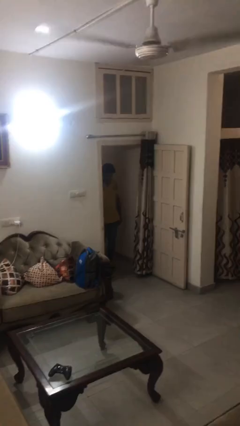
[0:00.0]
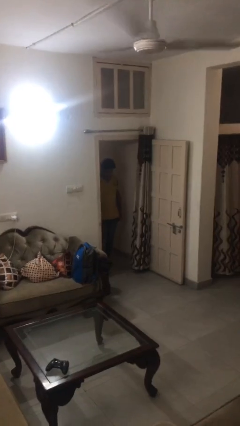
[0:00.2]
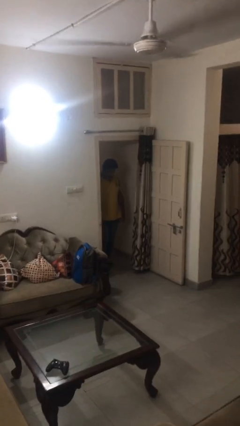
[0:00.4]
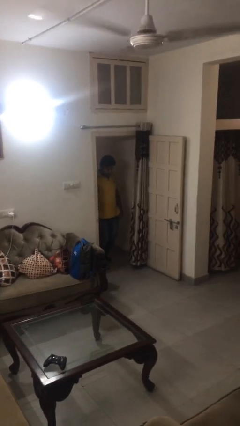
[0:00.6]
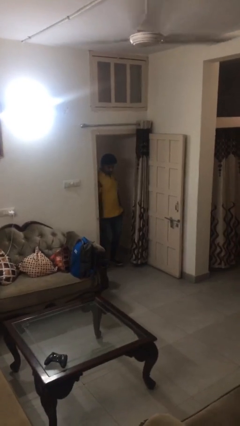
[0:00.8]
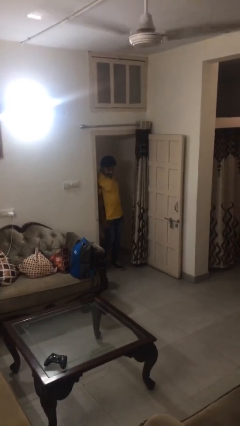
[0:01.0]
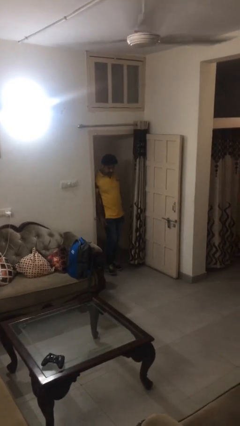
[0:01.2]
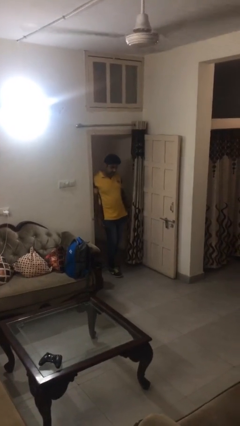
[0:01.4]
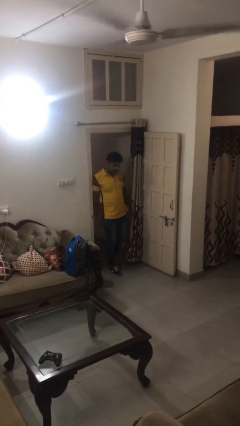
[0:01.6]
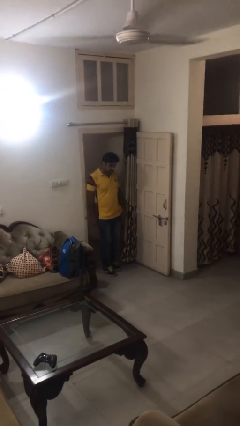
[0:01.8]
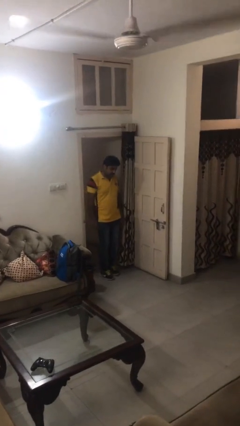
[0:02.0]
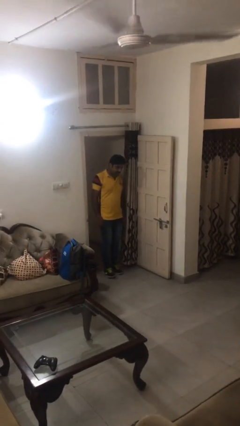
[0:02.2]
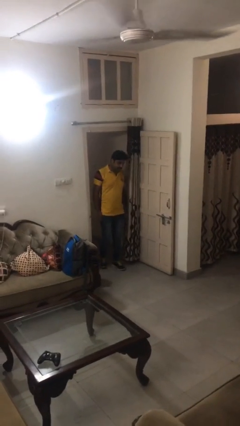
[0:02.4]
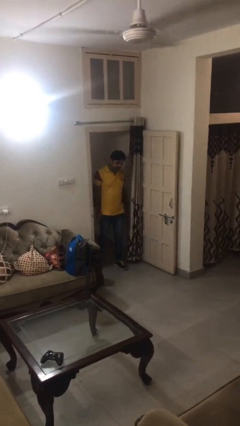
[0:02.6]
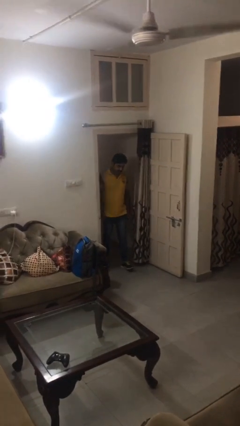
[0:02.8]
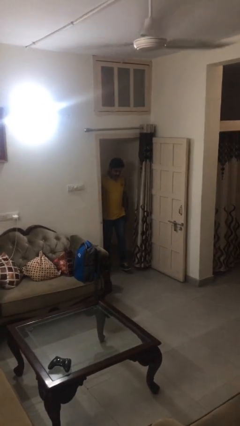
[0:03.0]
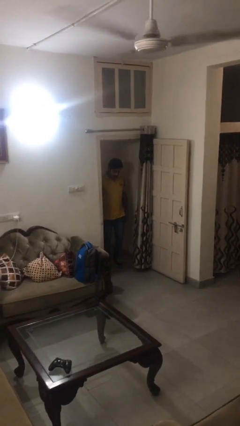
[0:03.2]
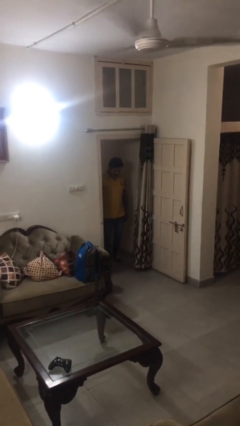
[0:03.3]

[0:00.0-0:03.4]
person bumps into wall

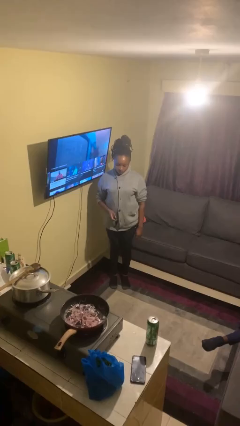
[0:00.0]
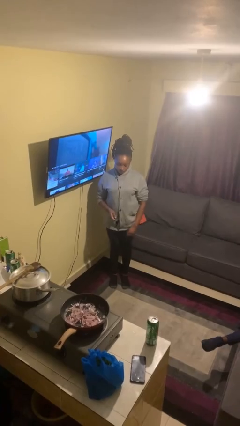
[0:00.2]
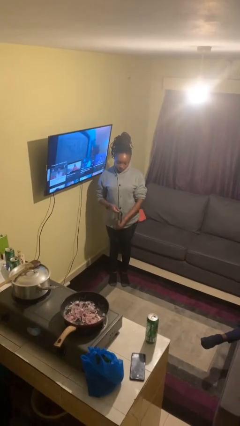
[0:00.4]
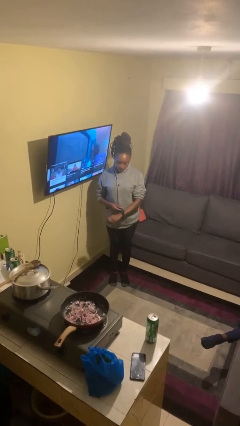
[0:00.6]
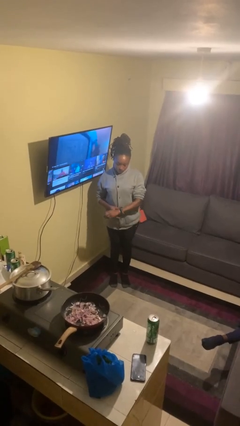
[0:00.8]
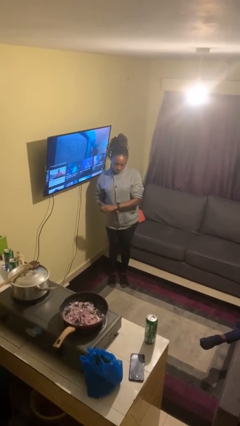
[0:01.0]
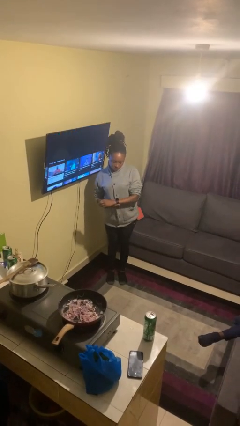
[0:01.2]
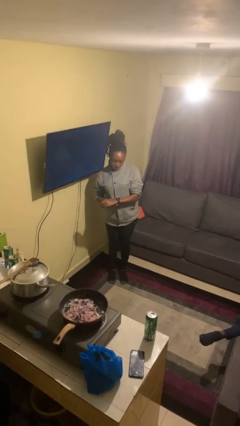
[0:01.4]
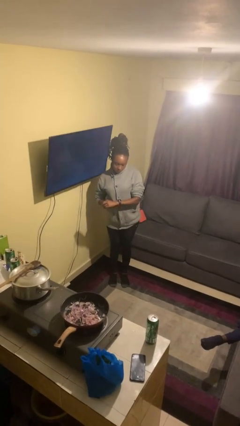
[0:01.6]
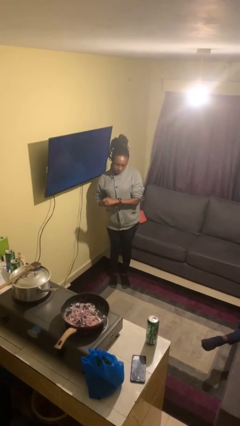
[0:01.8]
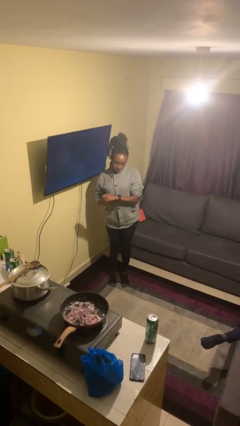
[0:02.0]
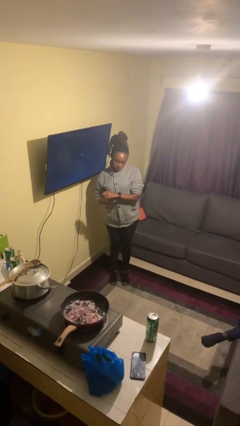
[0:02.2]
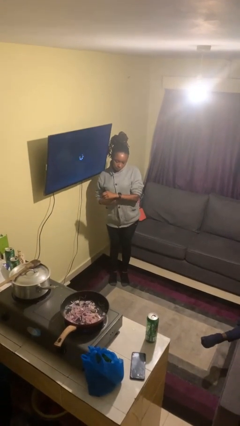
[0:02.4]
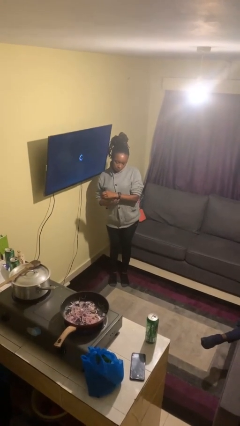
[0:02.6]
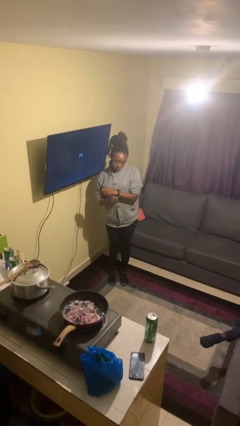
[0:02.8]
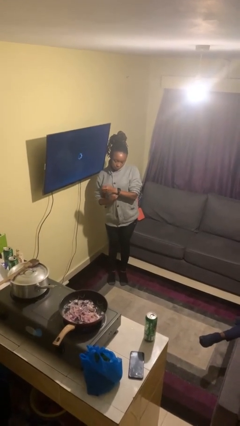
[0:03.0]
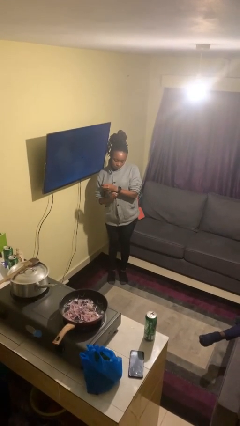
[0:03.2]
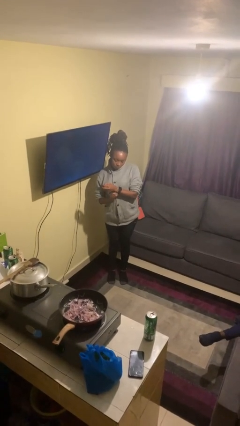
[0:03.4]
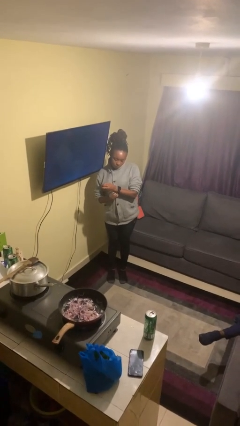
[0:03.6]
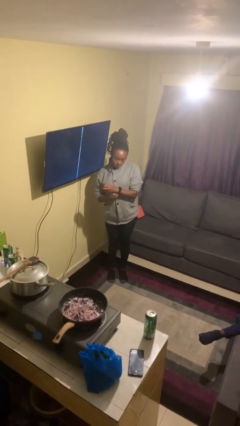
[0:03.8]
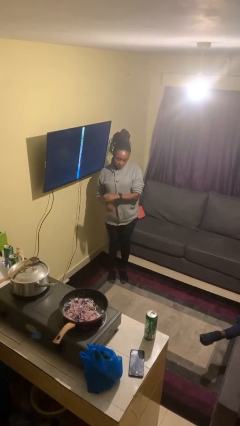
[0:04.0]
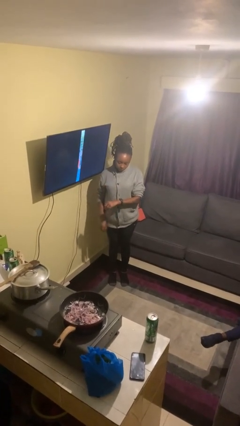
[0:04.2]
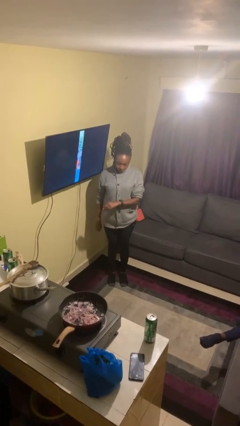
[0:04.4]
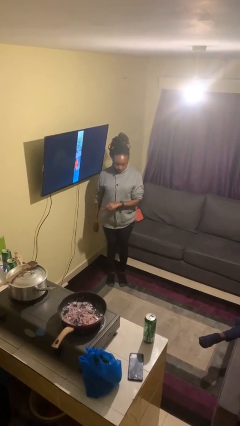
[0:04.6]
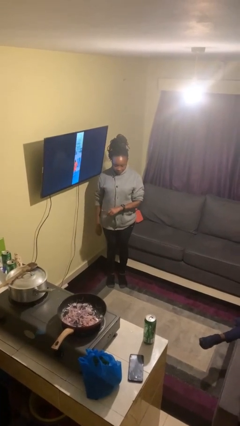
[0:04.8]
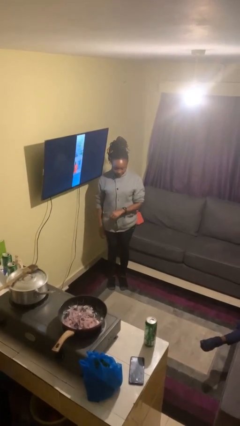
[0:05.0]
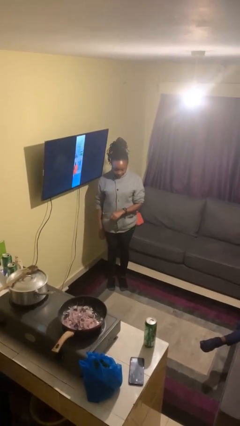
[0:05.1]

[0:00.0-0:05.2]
person puts on wristwatch

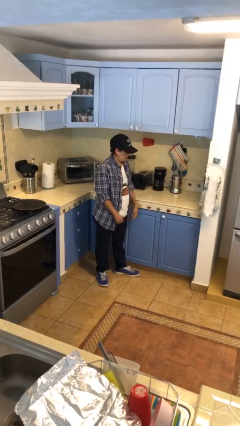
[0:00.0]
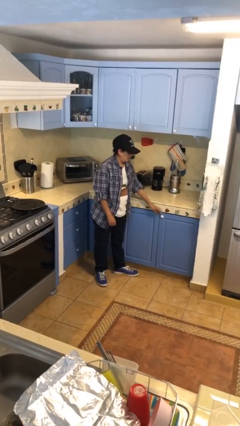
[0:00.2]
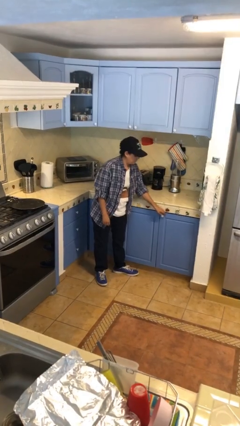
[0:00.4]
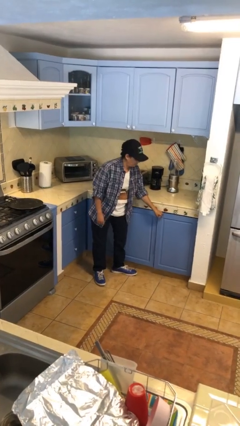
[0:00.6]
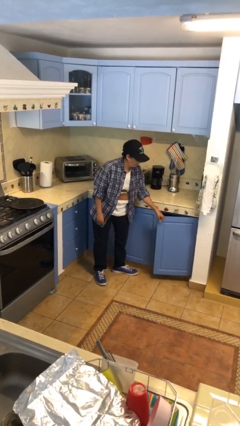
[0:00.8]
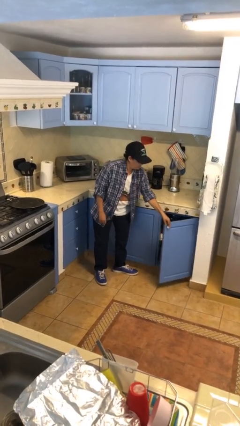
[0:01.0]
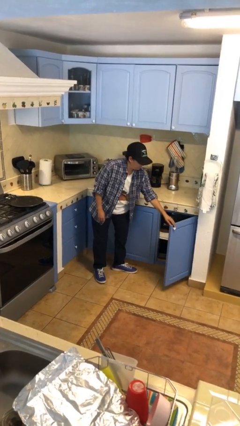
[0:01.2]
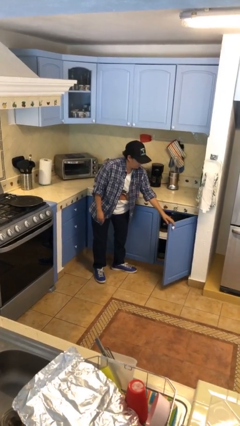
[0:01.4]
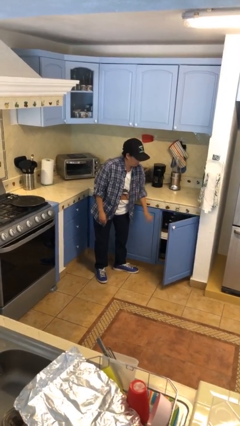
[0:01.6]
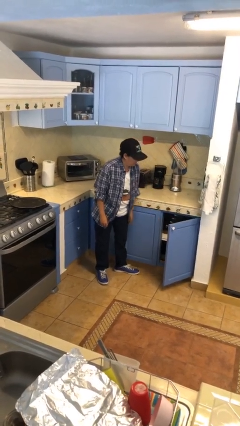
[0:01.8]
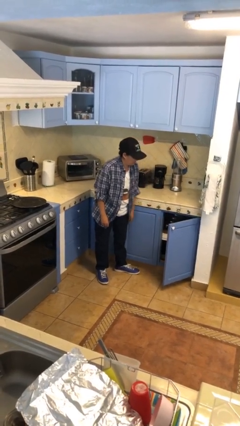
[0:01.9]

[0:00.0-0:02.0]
person opens cabinet

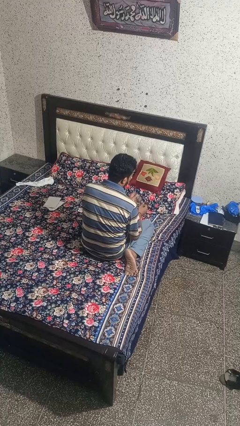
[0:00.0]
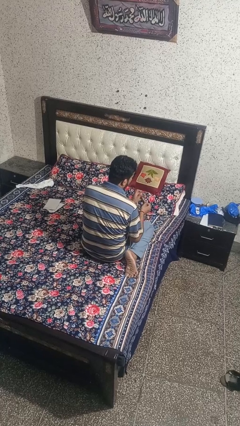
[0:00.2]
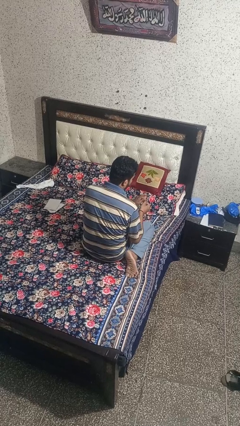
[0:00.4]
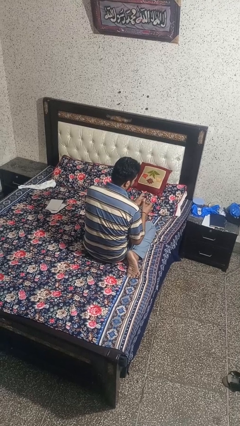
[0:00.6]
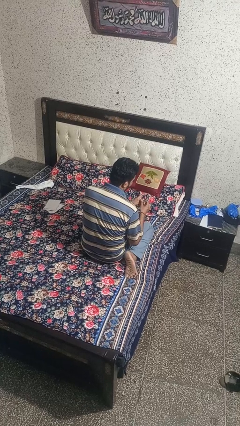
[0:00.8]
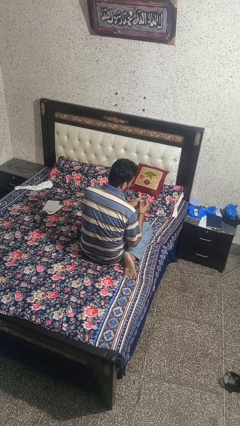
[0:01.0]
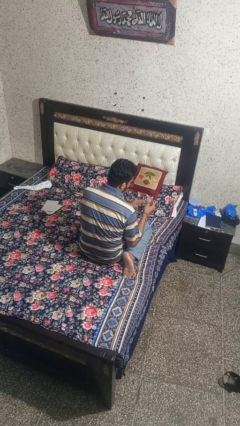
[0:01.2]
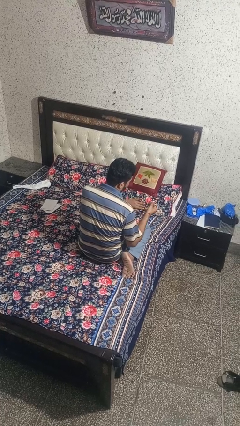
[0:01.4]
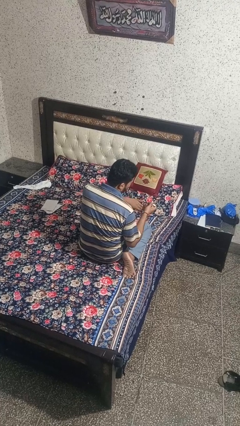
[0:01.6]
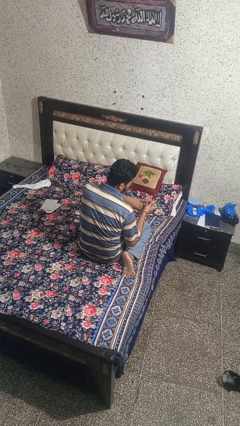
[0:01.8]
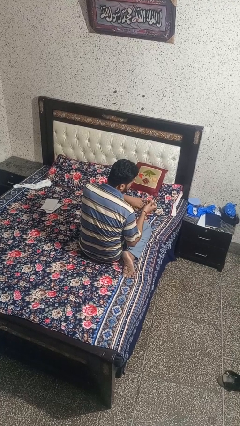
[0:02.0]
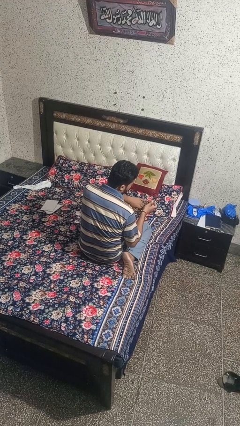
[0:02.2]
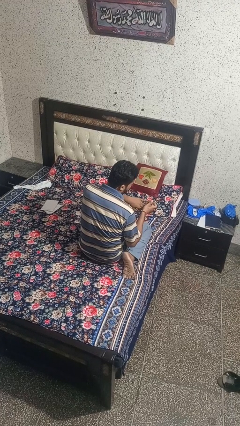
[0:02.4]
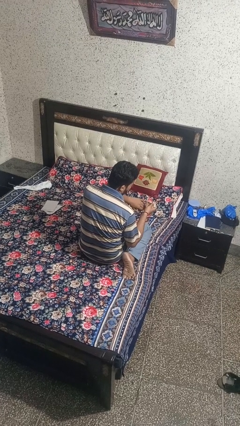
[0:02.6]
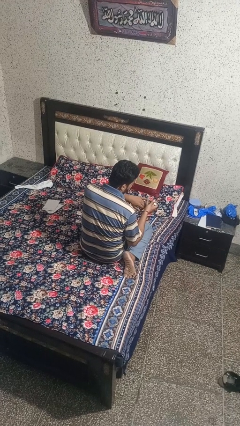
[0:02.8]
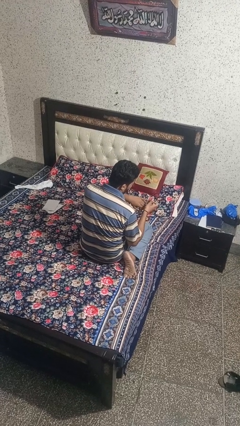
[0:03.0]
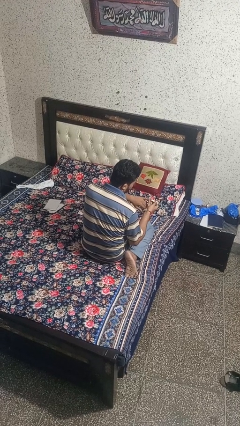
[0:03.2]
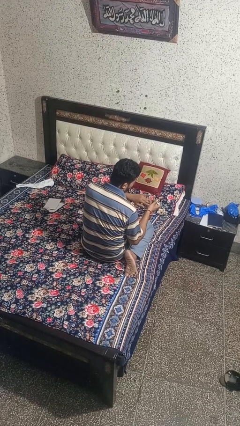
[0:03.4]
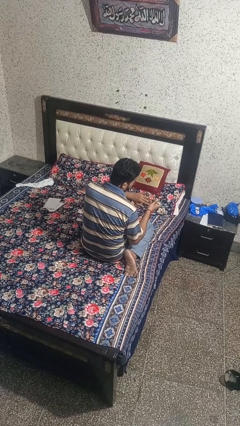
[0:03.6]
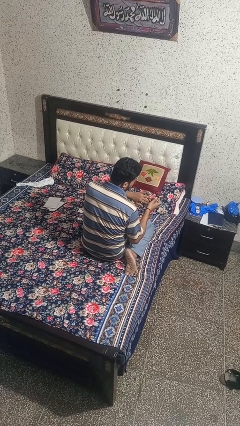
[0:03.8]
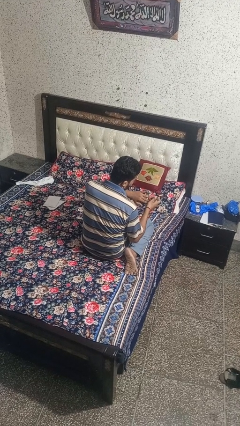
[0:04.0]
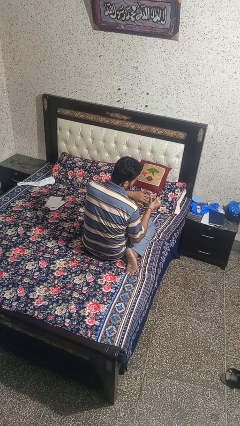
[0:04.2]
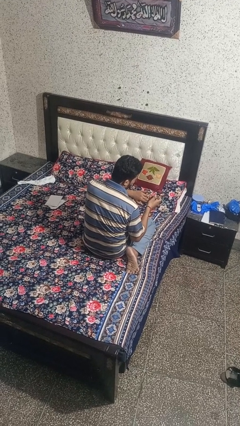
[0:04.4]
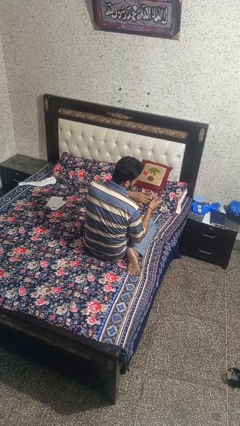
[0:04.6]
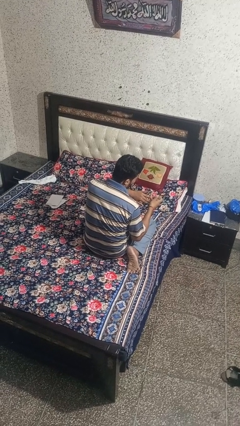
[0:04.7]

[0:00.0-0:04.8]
person clips fingernails

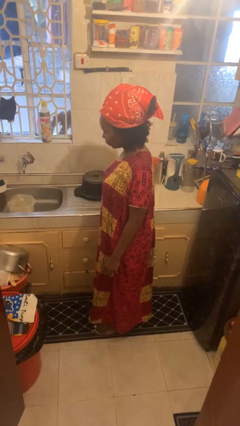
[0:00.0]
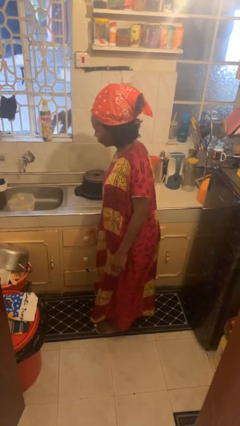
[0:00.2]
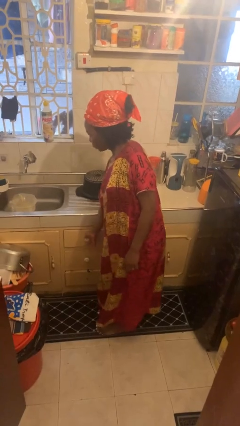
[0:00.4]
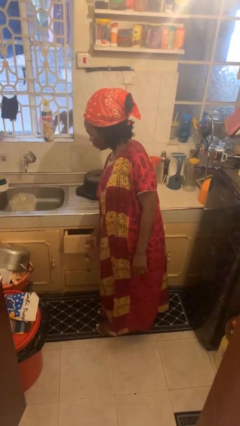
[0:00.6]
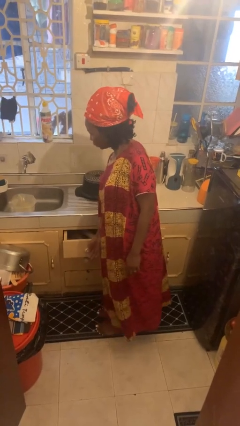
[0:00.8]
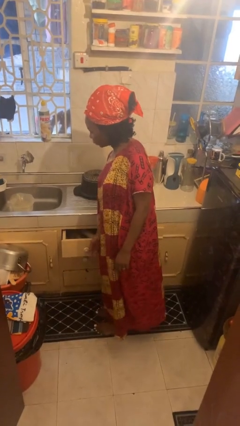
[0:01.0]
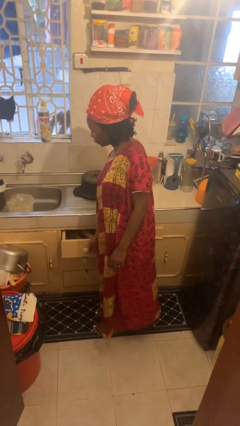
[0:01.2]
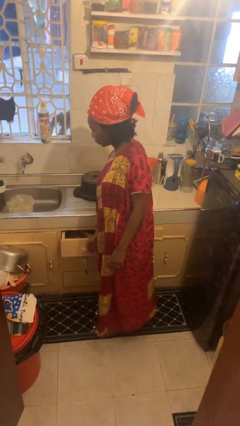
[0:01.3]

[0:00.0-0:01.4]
person opens kitchen drawer

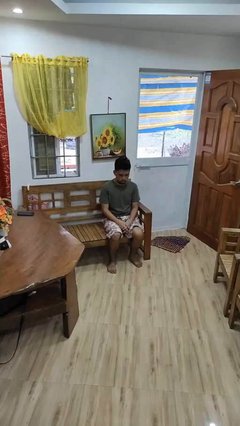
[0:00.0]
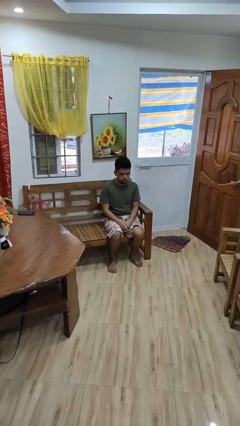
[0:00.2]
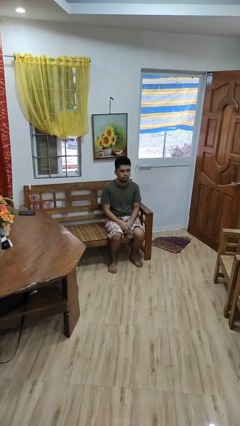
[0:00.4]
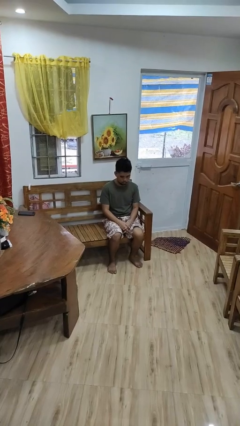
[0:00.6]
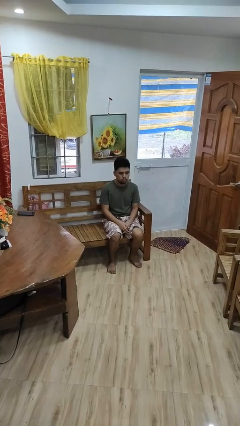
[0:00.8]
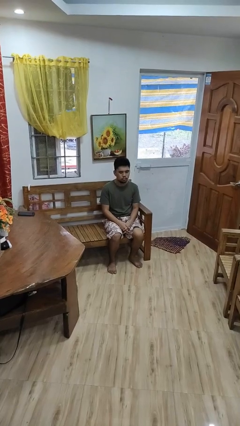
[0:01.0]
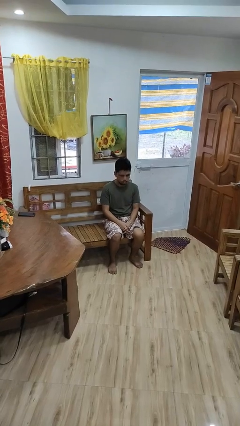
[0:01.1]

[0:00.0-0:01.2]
person nods head
